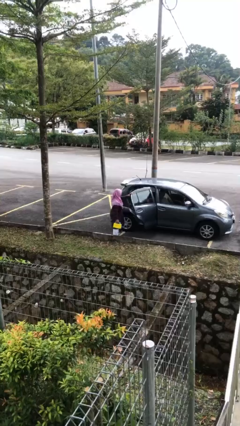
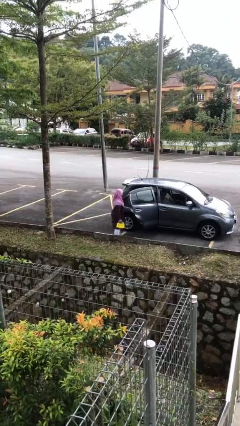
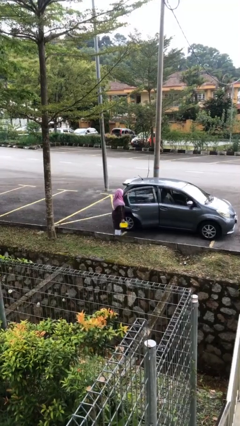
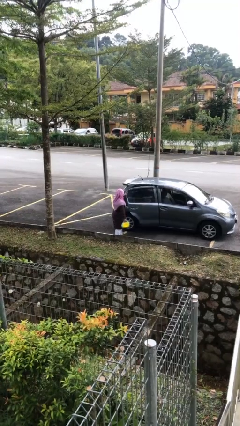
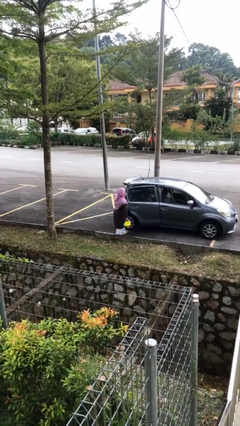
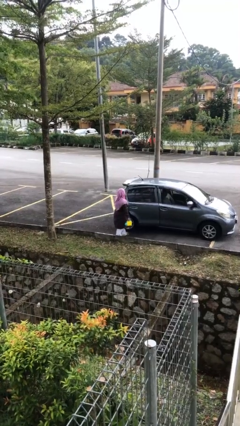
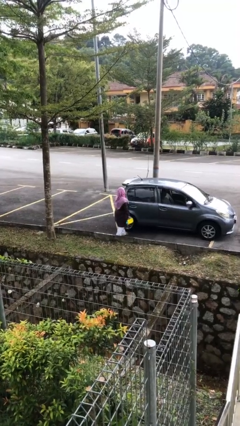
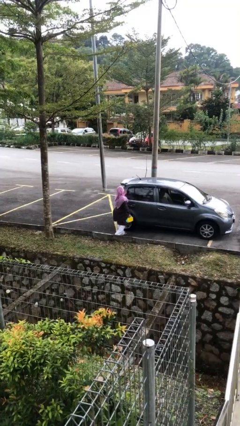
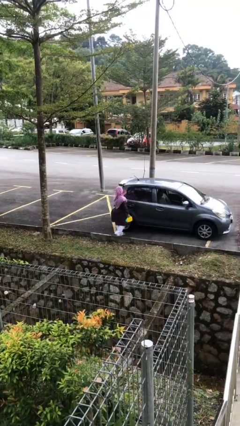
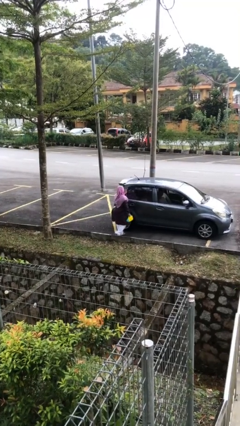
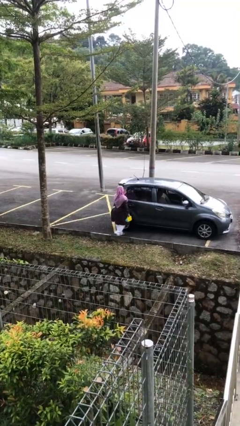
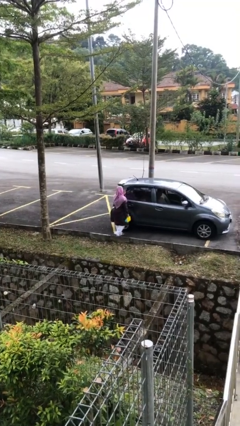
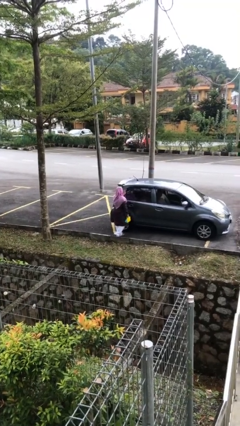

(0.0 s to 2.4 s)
person closes car door

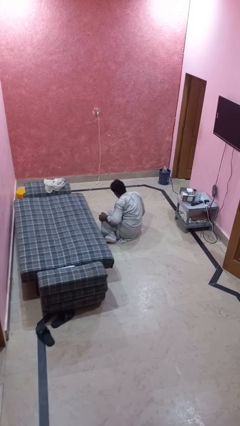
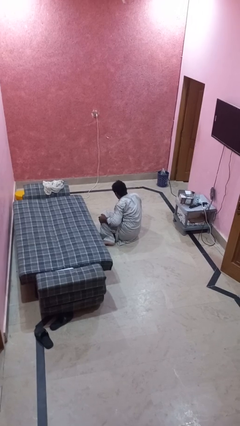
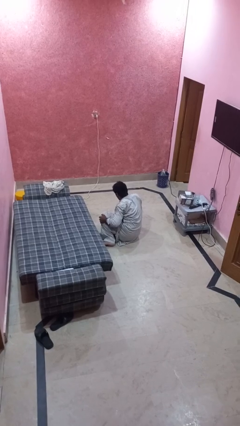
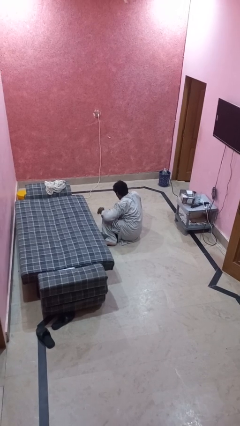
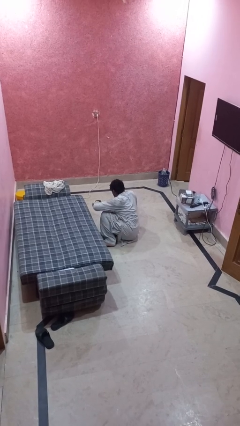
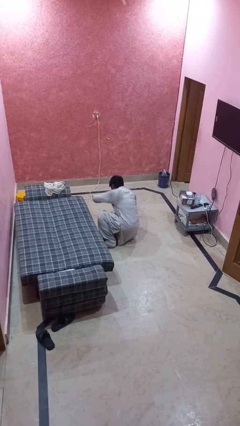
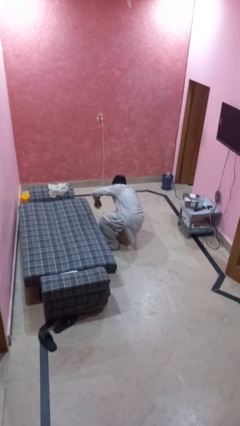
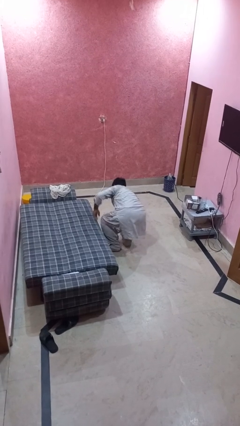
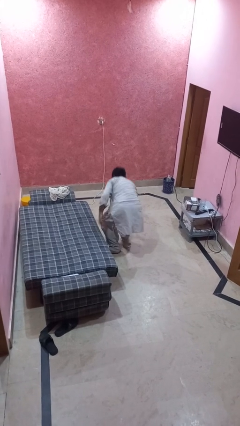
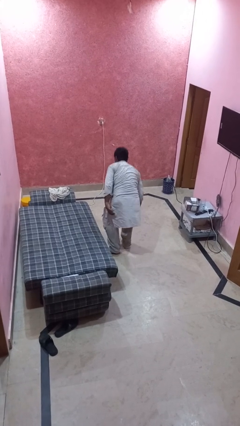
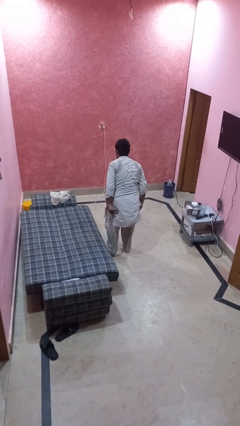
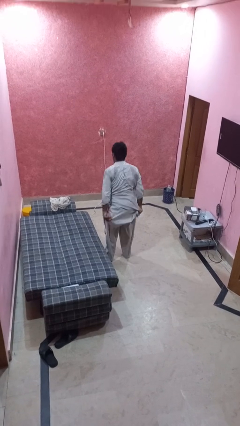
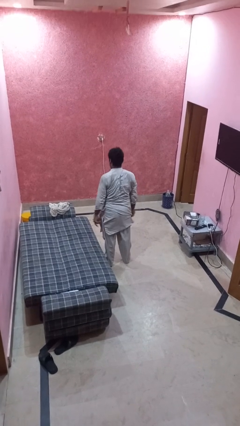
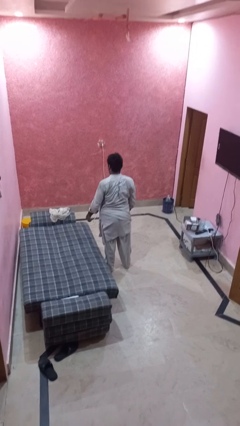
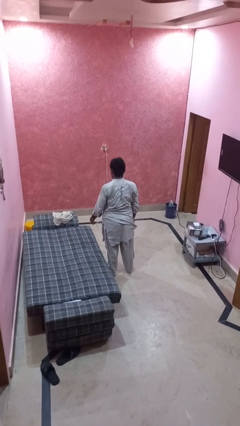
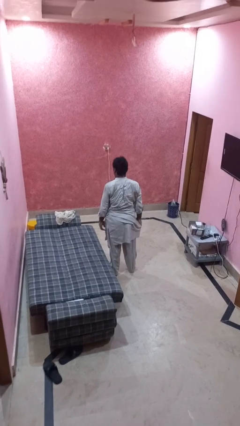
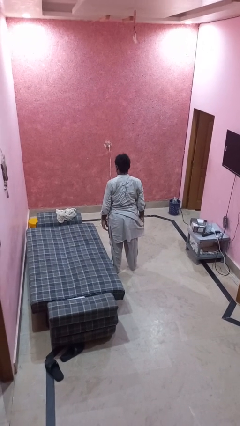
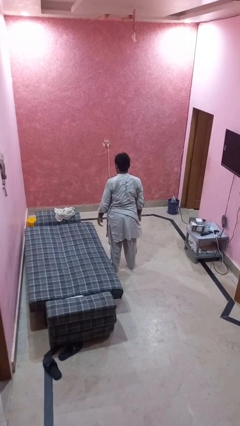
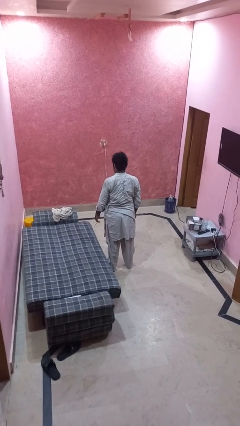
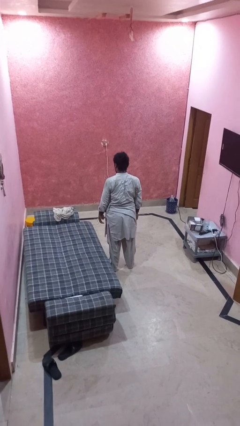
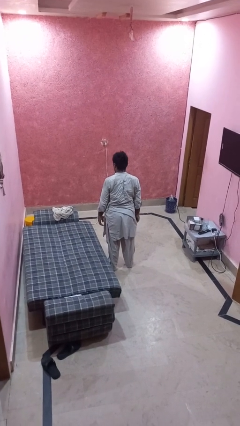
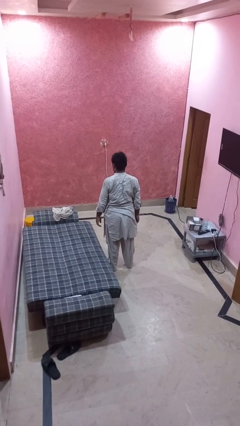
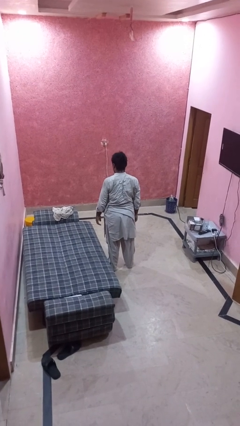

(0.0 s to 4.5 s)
person stands up from floor

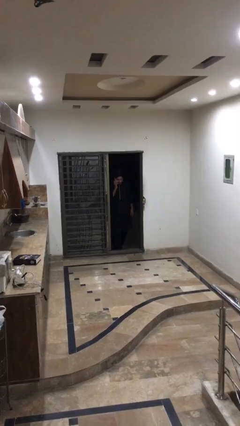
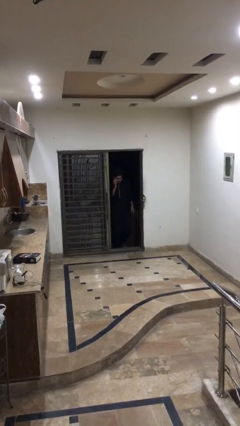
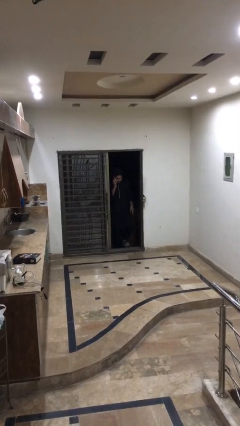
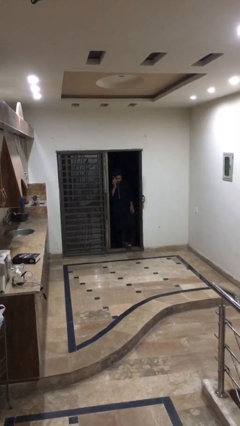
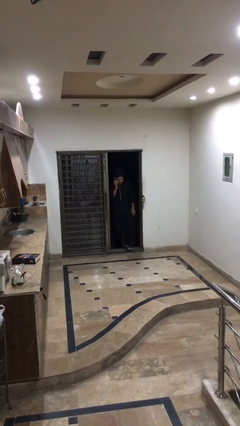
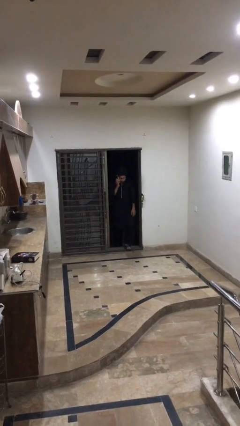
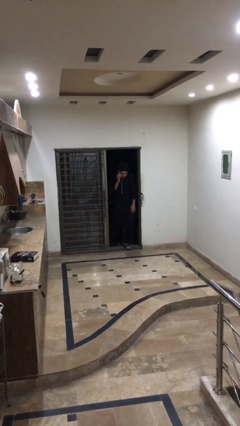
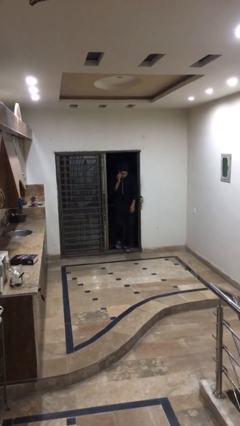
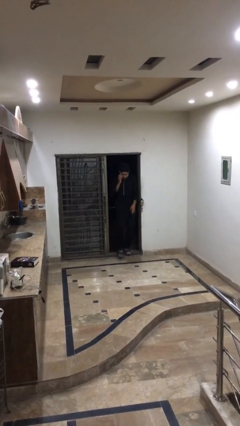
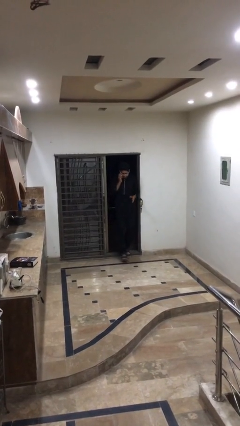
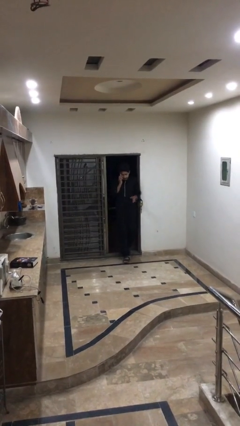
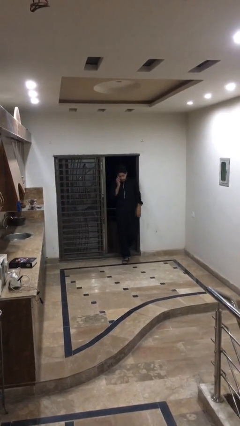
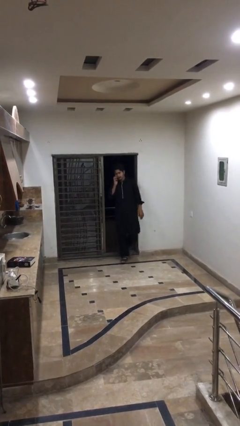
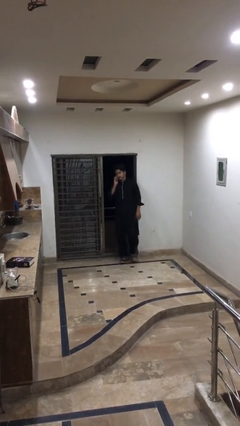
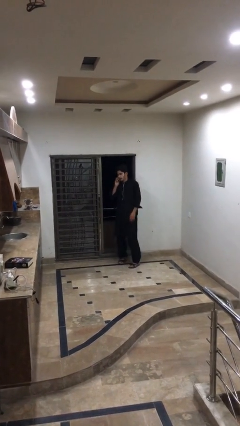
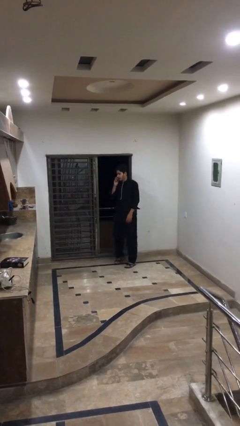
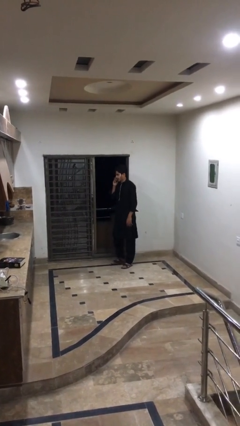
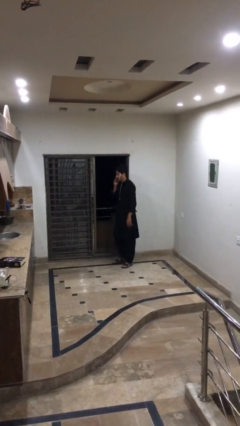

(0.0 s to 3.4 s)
person enters scene through structure

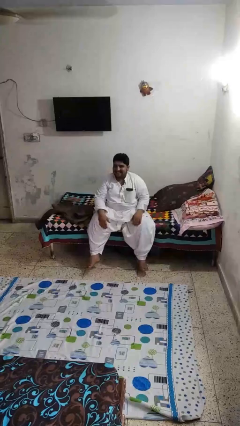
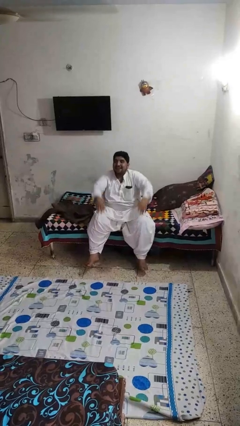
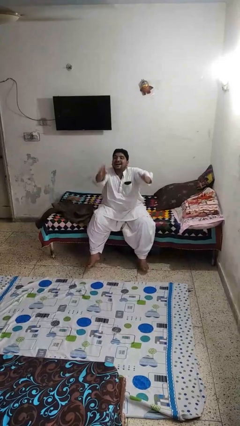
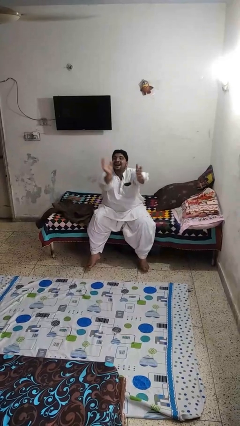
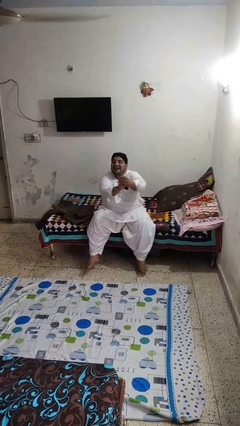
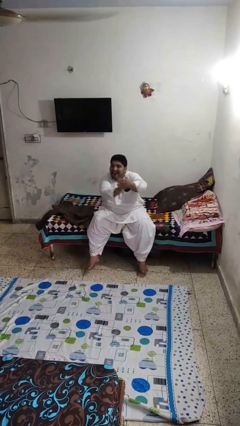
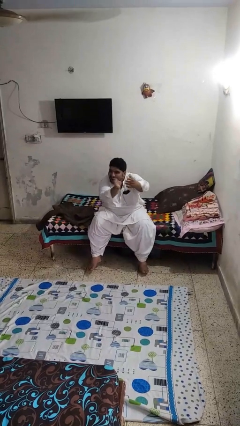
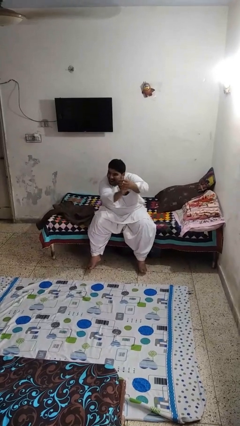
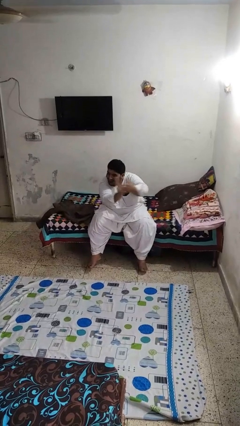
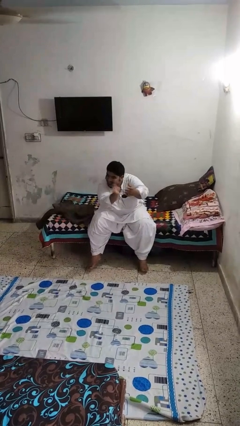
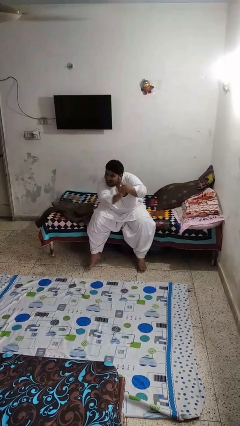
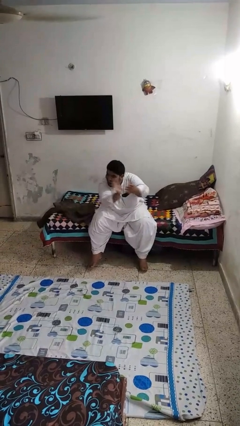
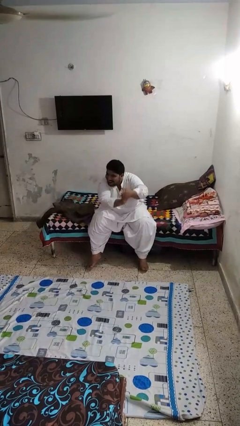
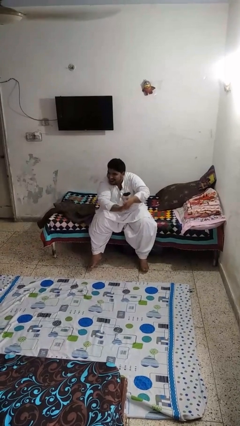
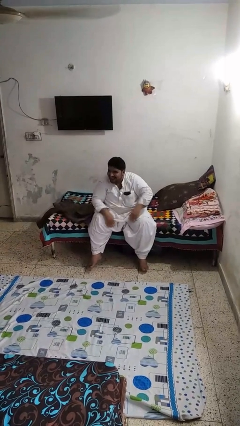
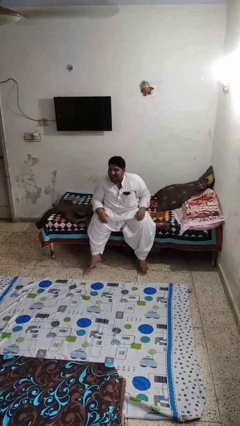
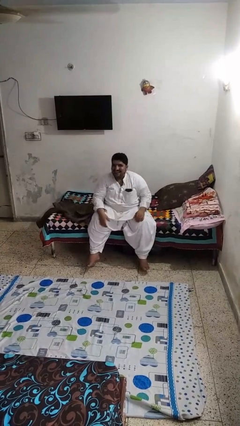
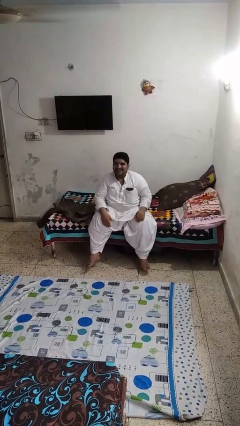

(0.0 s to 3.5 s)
person claps hands

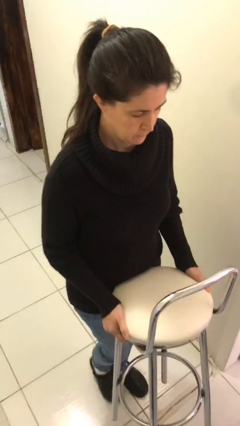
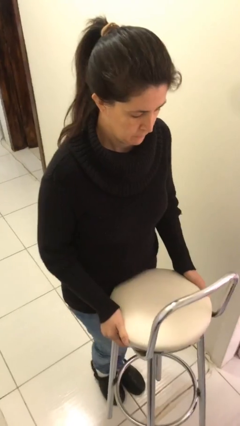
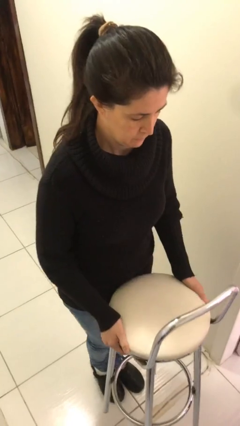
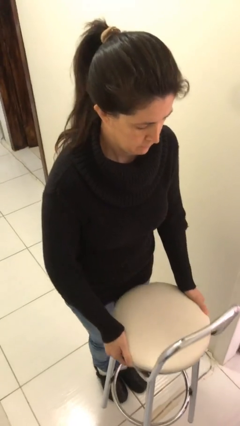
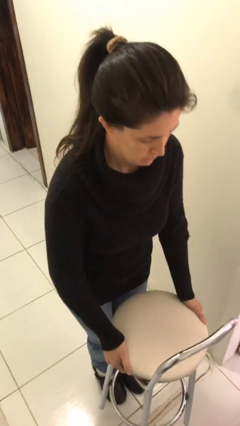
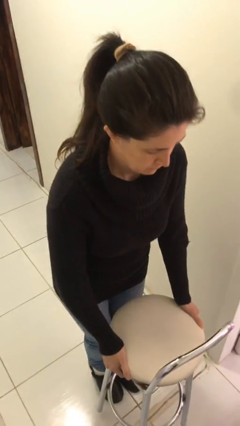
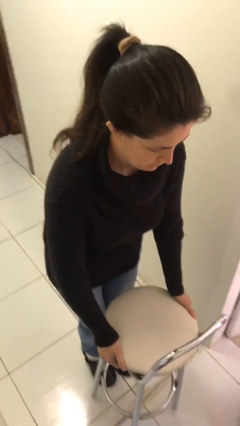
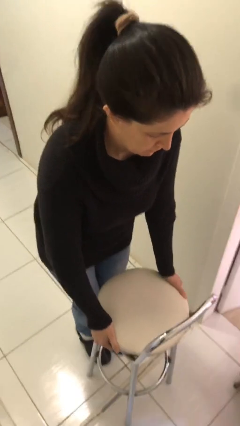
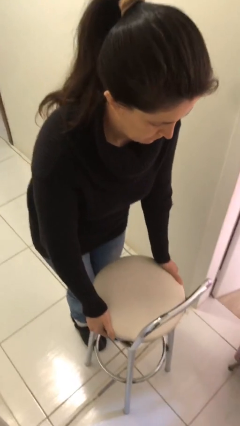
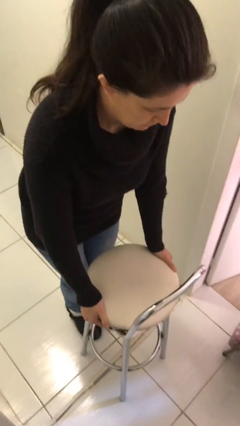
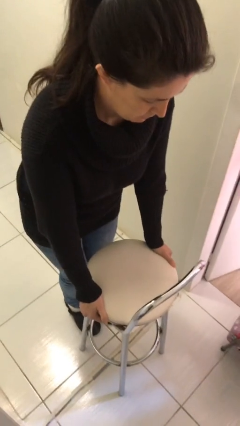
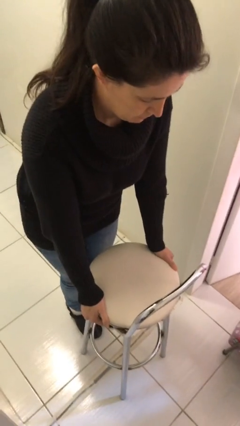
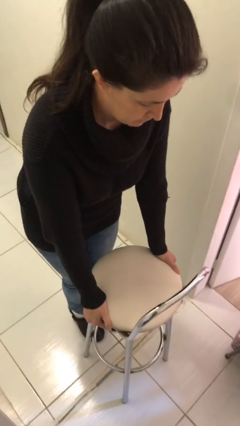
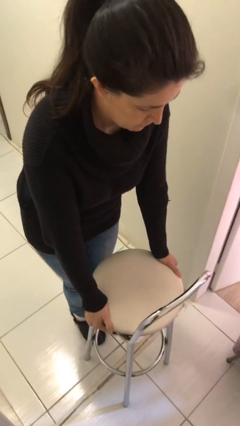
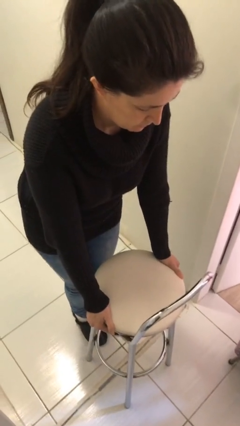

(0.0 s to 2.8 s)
person puts down object on floor

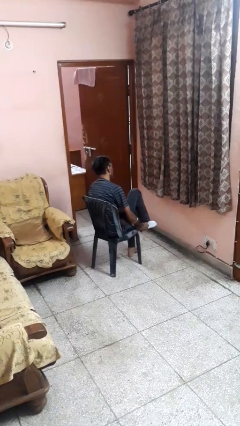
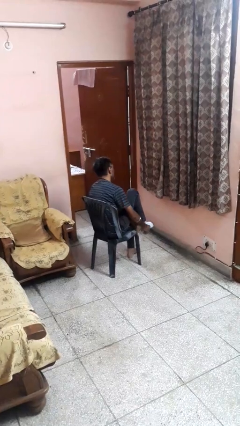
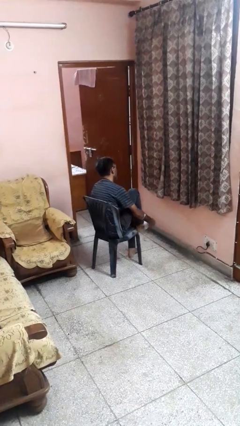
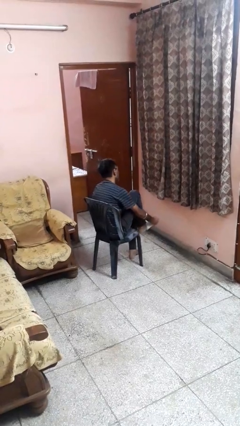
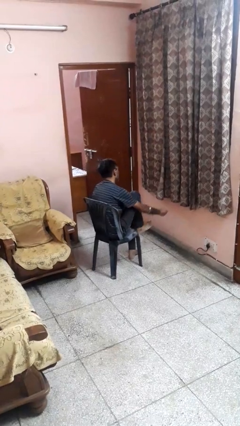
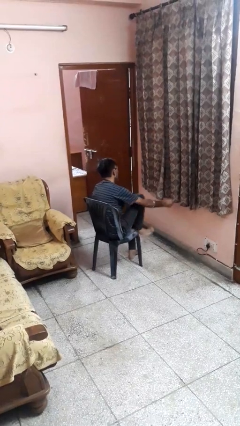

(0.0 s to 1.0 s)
person takes off socks
